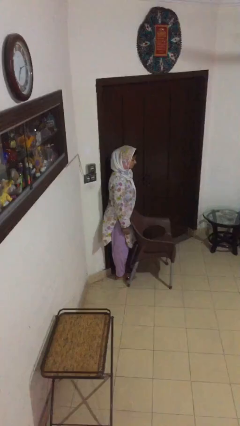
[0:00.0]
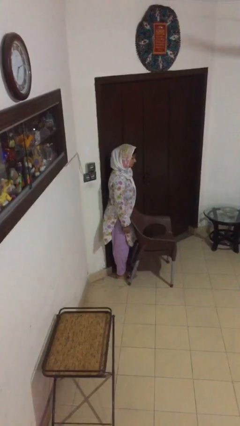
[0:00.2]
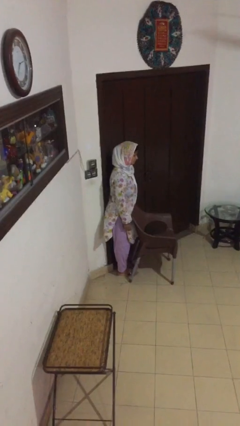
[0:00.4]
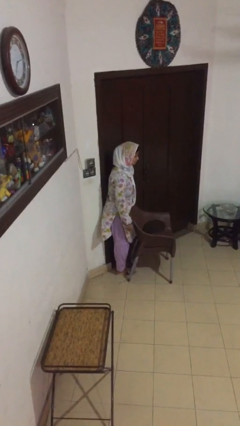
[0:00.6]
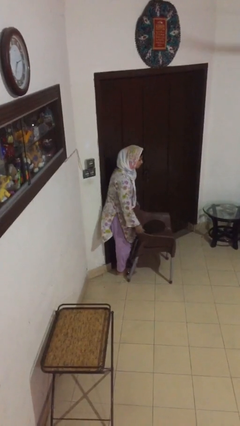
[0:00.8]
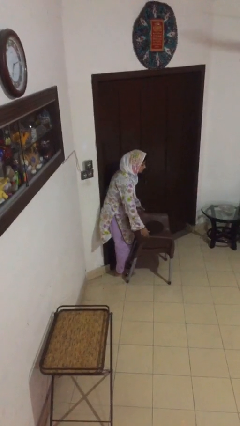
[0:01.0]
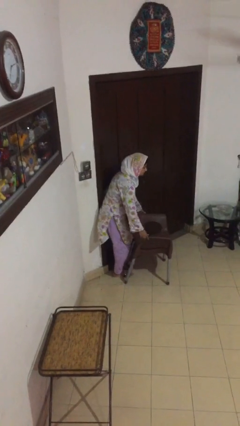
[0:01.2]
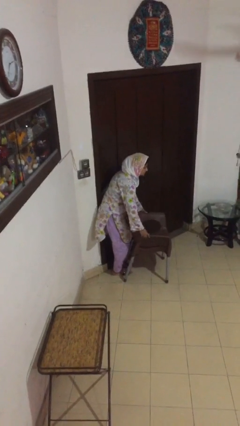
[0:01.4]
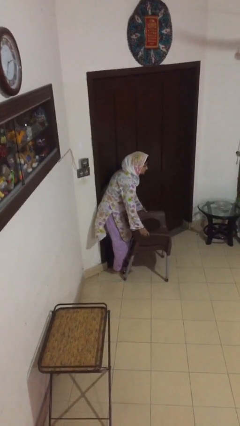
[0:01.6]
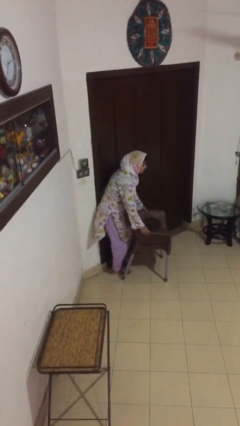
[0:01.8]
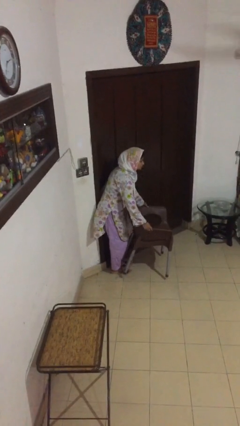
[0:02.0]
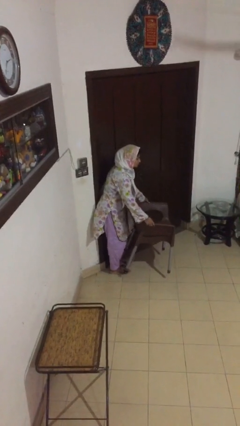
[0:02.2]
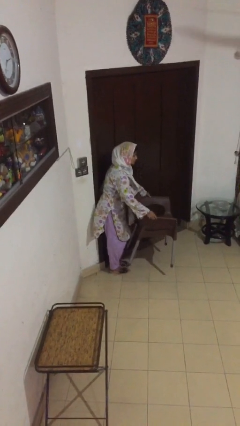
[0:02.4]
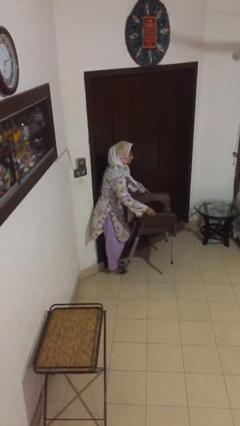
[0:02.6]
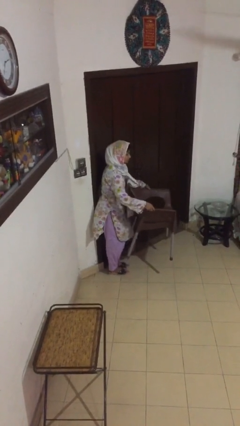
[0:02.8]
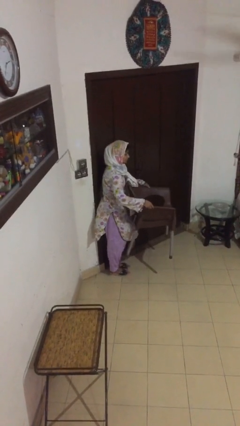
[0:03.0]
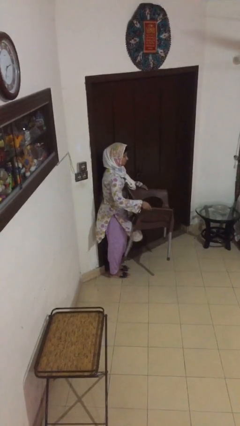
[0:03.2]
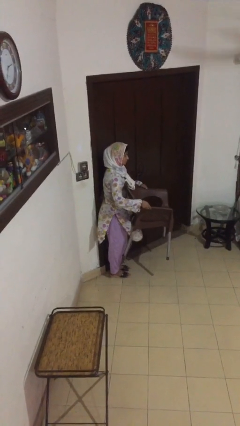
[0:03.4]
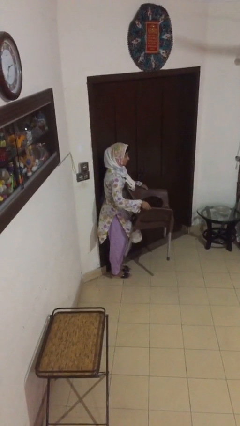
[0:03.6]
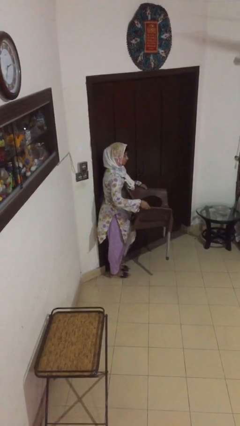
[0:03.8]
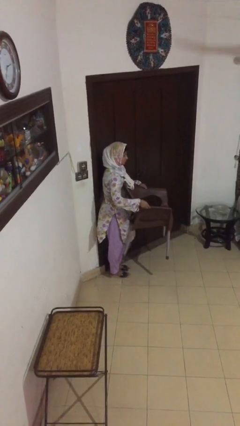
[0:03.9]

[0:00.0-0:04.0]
person carries heavy object

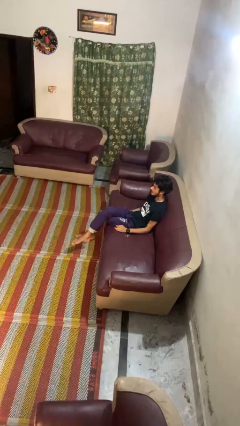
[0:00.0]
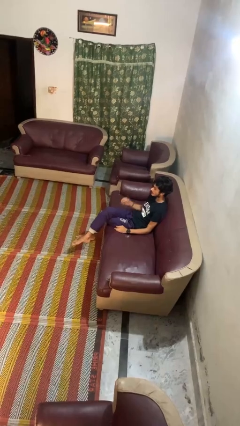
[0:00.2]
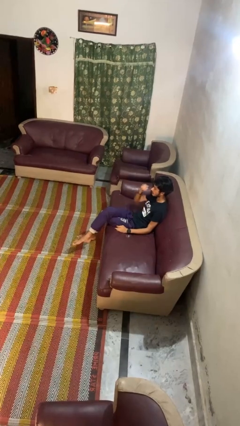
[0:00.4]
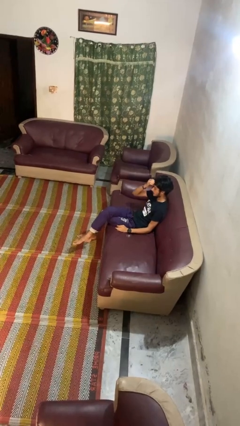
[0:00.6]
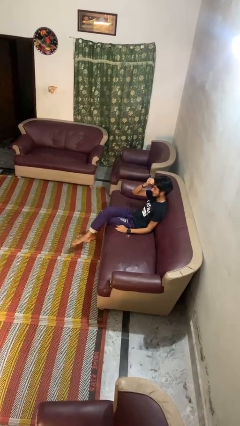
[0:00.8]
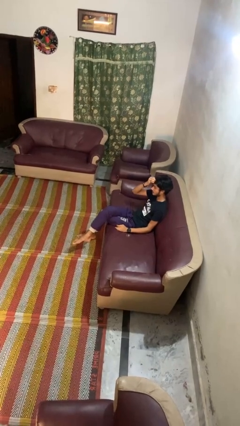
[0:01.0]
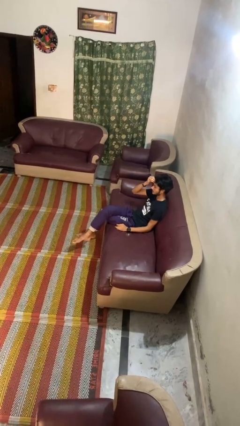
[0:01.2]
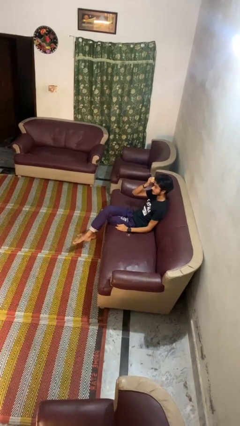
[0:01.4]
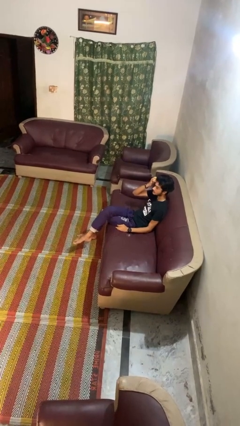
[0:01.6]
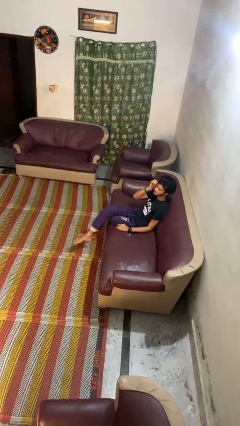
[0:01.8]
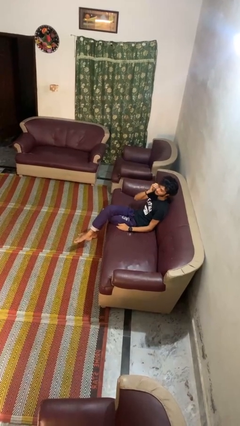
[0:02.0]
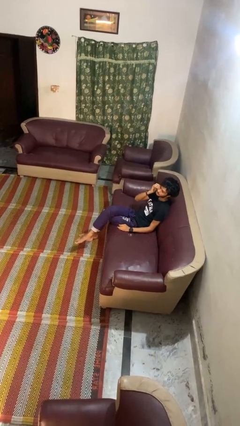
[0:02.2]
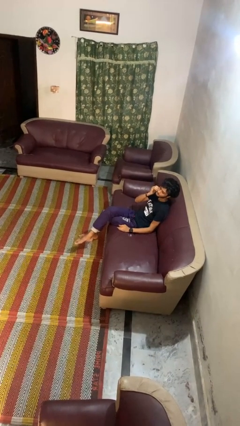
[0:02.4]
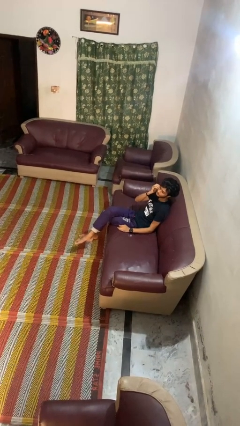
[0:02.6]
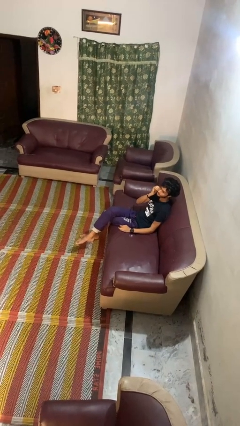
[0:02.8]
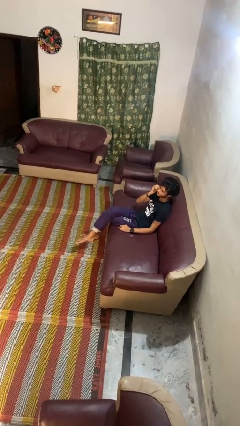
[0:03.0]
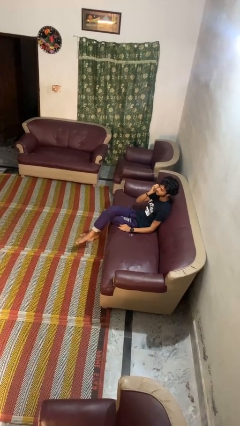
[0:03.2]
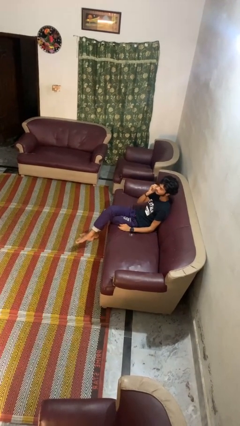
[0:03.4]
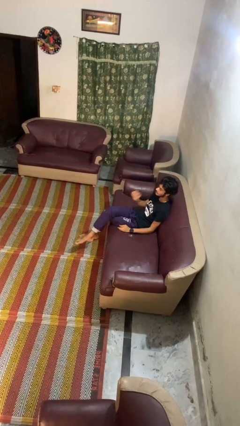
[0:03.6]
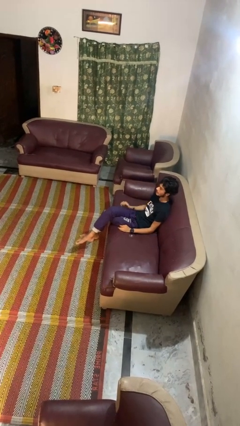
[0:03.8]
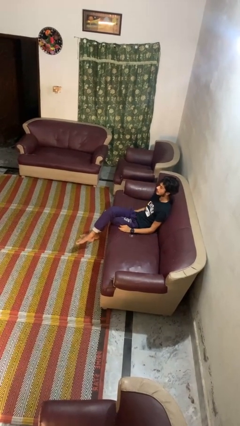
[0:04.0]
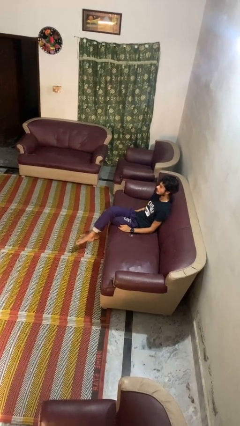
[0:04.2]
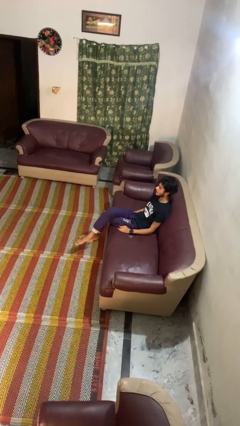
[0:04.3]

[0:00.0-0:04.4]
person scratches face

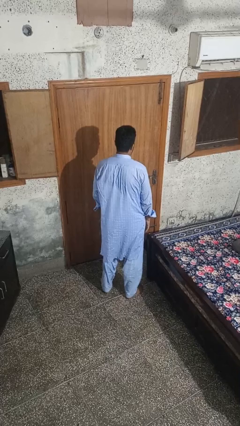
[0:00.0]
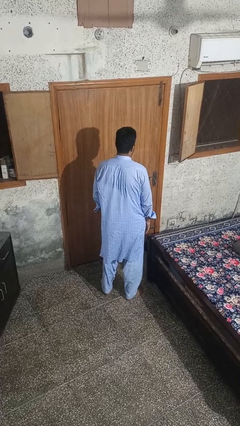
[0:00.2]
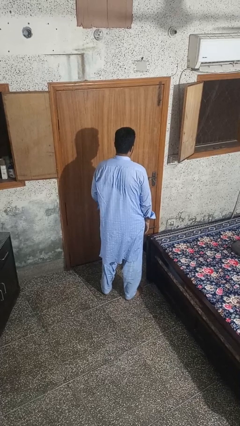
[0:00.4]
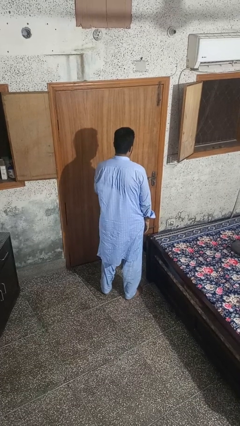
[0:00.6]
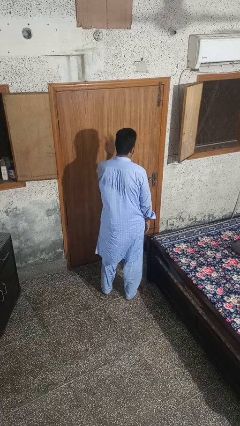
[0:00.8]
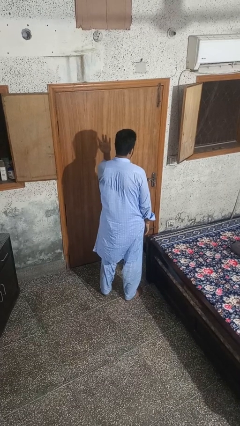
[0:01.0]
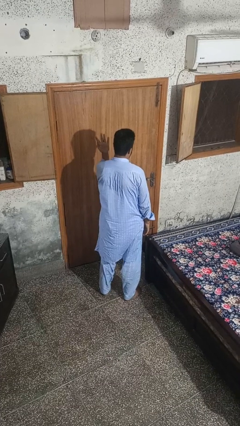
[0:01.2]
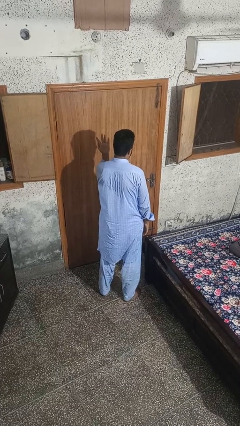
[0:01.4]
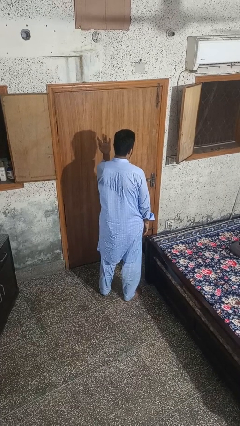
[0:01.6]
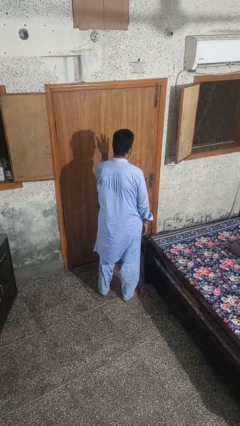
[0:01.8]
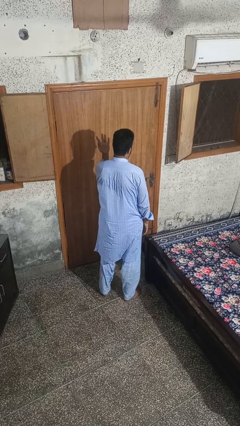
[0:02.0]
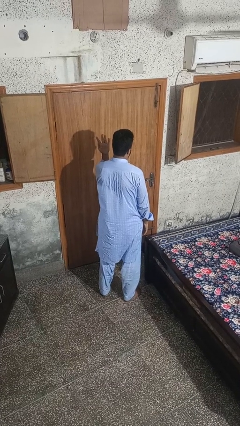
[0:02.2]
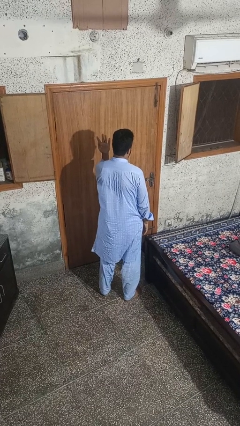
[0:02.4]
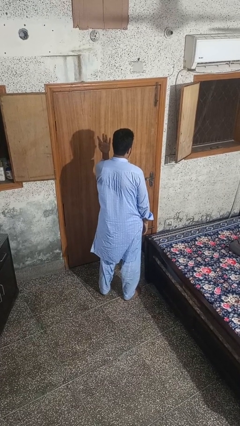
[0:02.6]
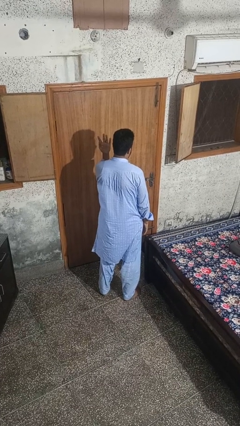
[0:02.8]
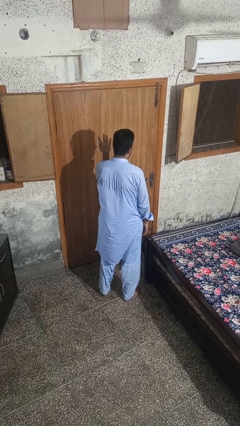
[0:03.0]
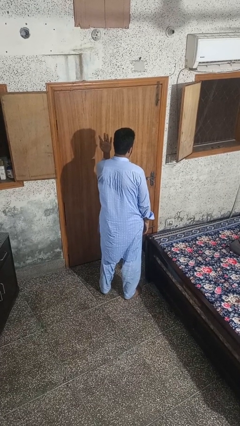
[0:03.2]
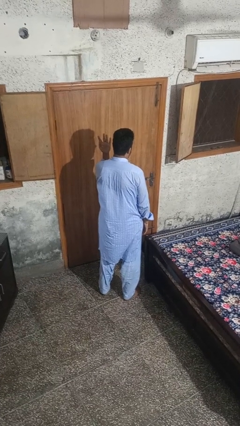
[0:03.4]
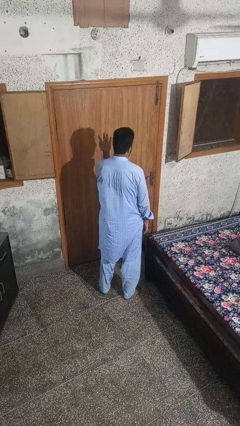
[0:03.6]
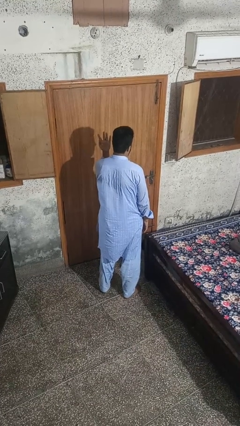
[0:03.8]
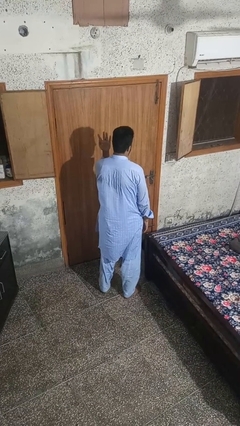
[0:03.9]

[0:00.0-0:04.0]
person gestures number four

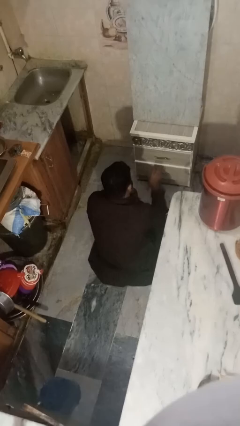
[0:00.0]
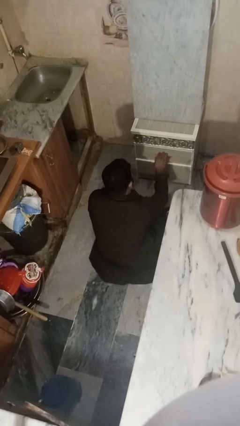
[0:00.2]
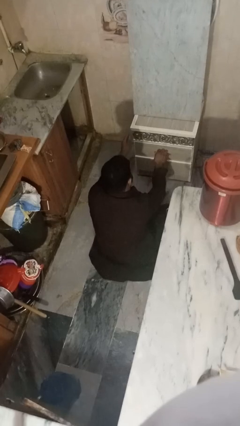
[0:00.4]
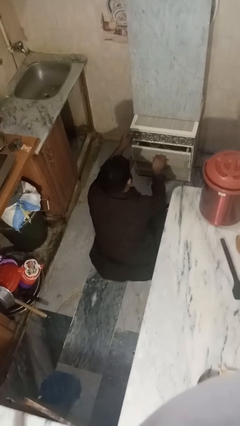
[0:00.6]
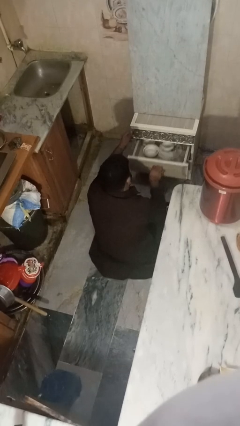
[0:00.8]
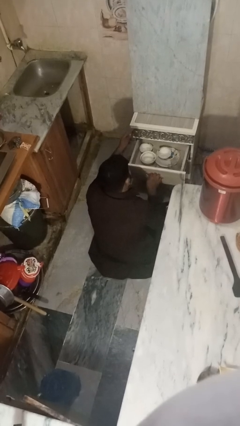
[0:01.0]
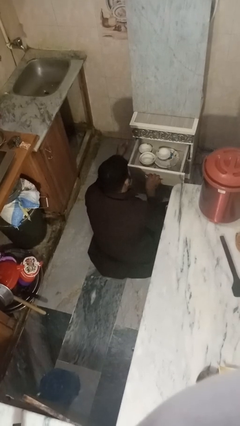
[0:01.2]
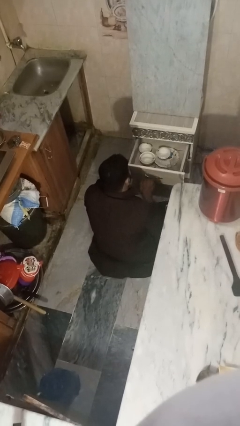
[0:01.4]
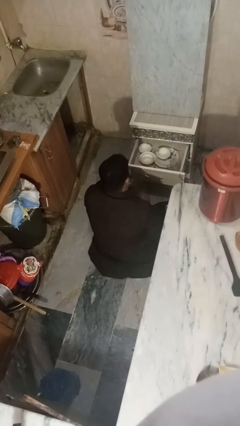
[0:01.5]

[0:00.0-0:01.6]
person opens kitchen drawer

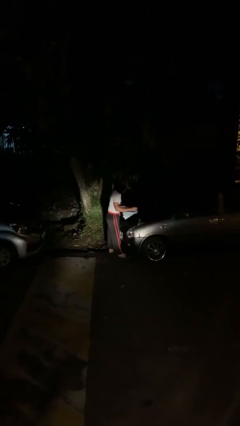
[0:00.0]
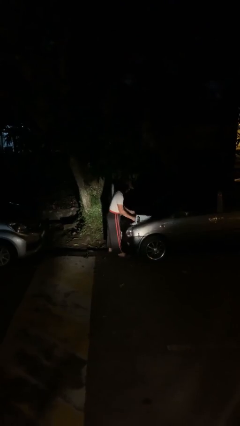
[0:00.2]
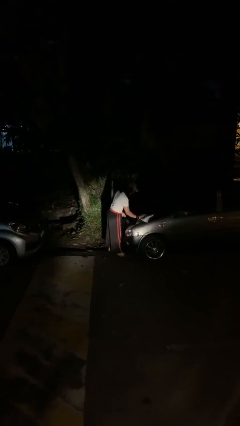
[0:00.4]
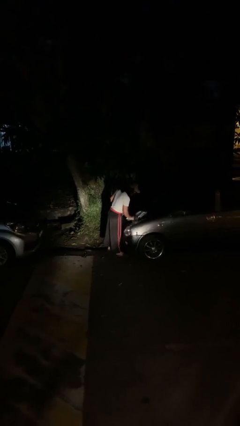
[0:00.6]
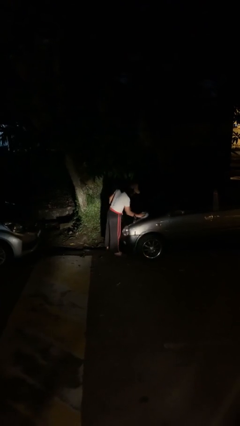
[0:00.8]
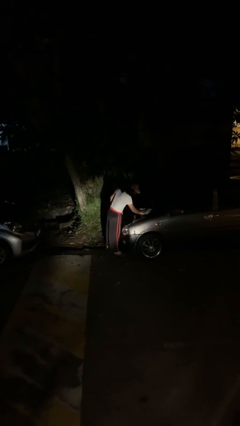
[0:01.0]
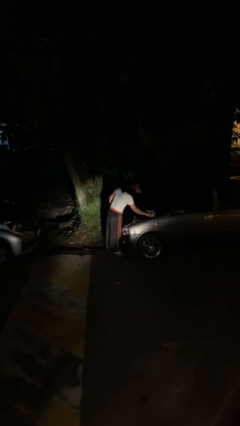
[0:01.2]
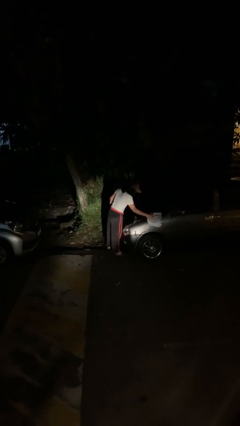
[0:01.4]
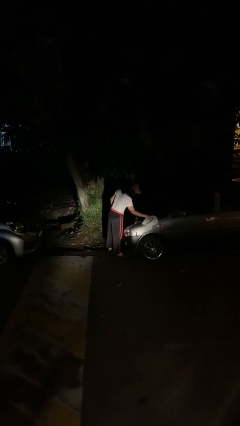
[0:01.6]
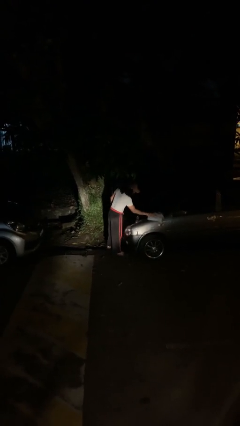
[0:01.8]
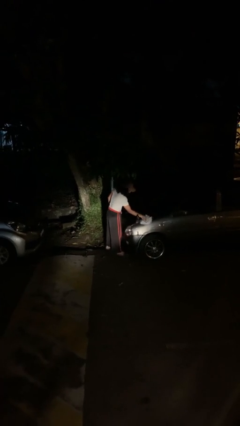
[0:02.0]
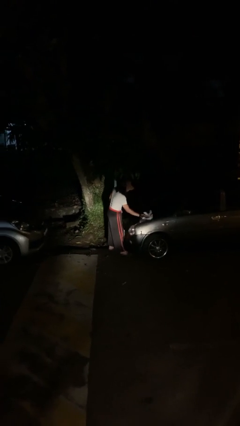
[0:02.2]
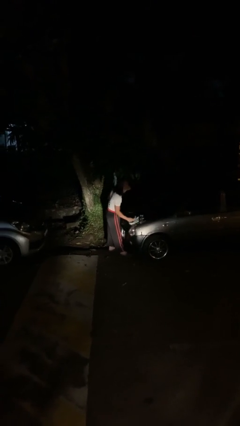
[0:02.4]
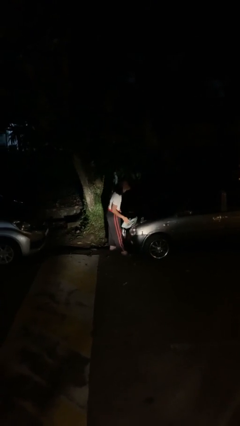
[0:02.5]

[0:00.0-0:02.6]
person polishes car with rag

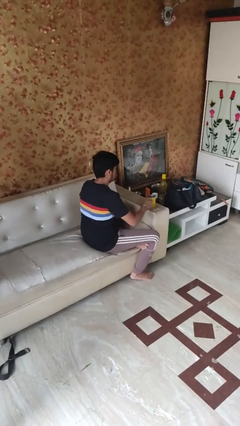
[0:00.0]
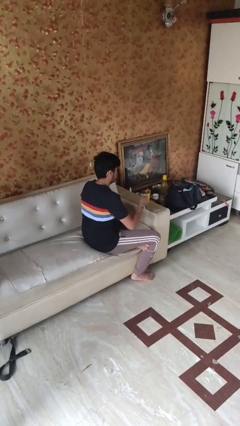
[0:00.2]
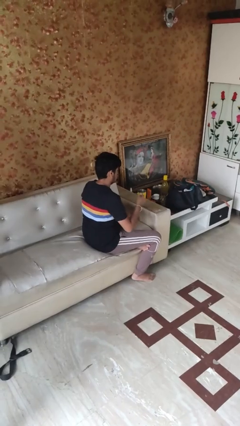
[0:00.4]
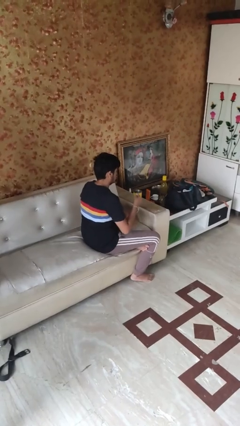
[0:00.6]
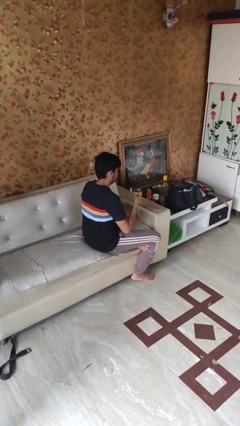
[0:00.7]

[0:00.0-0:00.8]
person picks up object from table

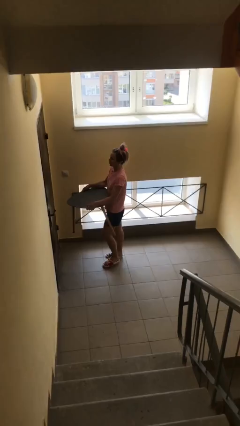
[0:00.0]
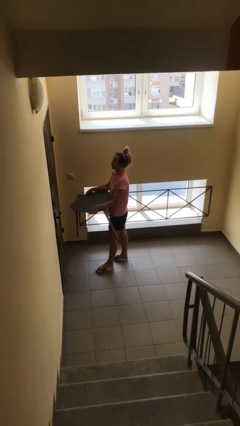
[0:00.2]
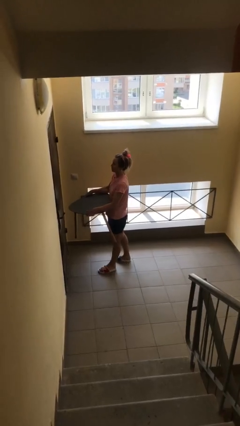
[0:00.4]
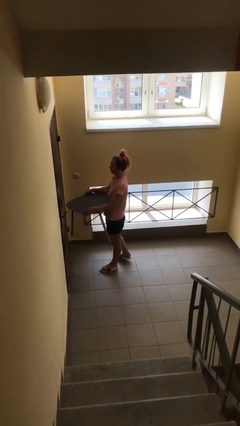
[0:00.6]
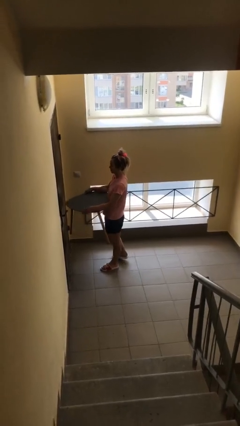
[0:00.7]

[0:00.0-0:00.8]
person carries furniture
